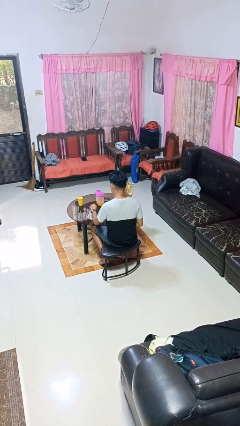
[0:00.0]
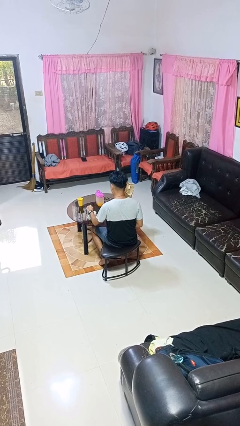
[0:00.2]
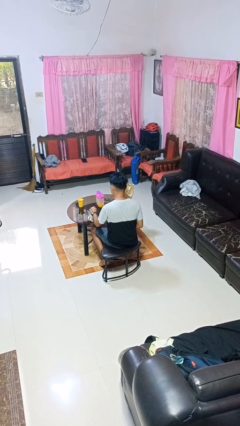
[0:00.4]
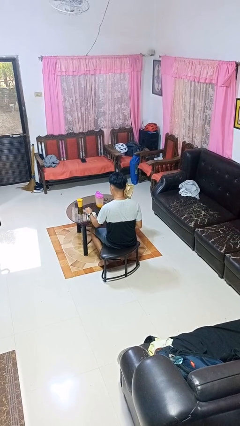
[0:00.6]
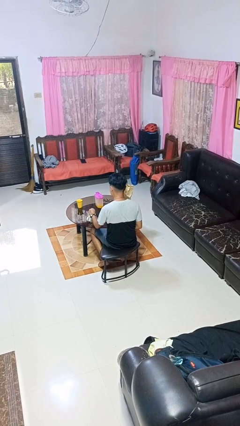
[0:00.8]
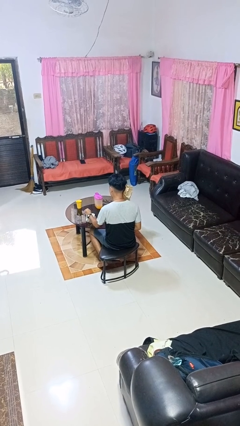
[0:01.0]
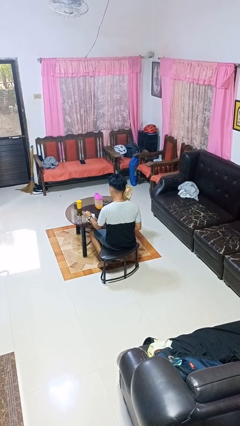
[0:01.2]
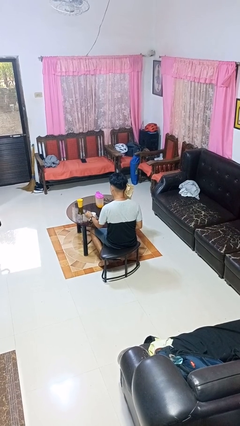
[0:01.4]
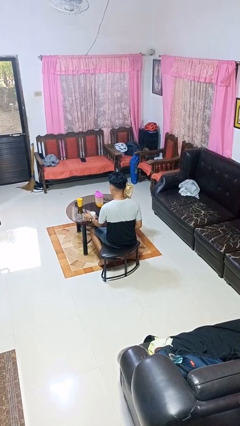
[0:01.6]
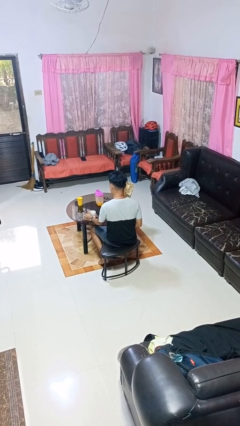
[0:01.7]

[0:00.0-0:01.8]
person stirs mug

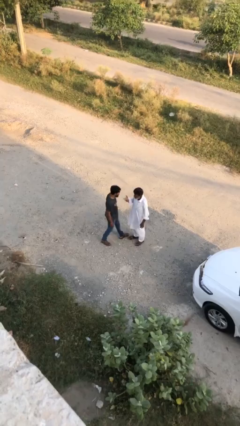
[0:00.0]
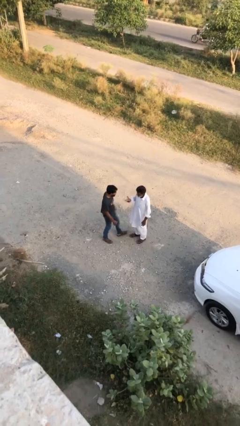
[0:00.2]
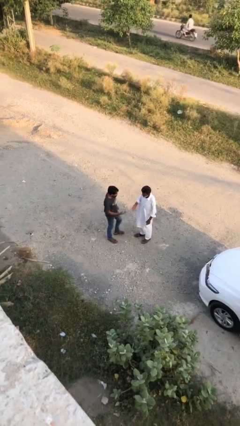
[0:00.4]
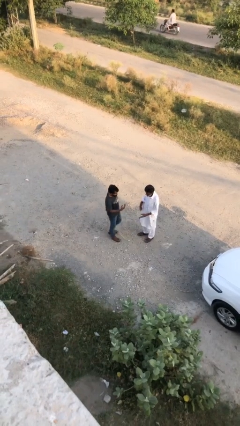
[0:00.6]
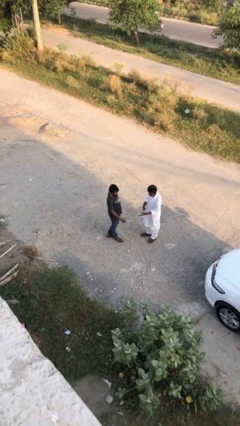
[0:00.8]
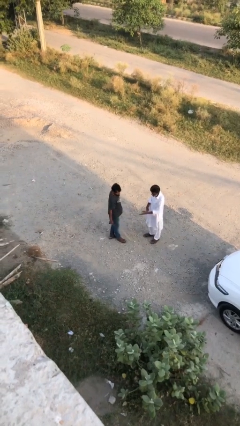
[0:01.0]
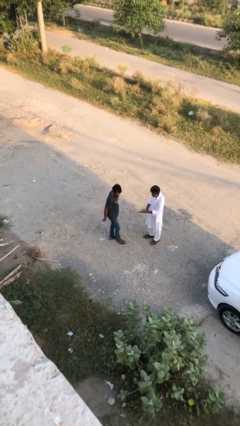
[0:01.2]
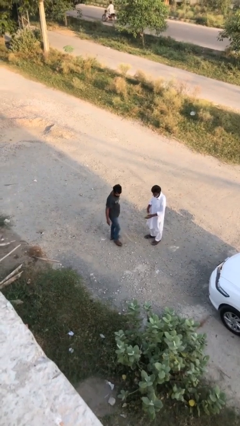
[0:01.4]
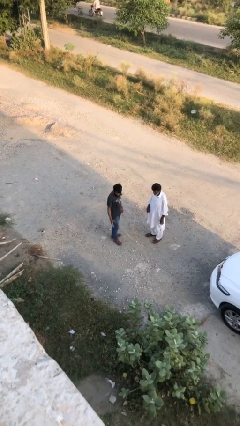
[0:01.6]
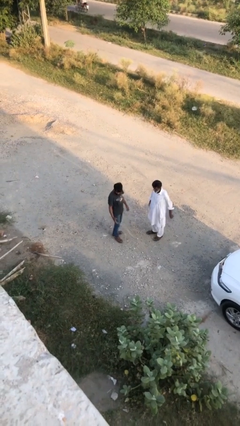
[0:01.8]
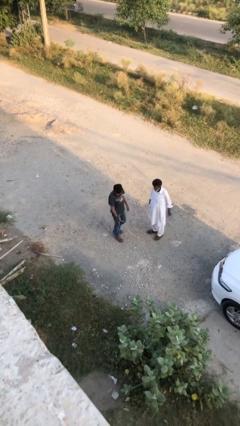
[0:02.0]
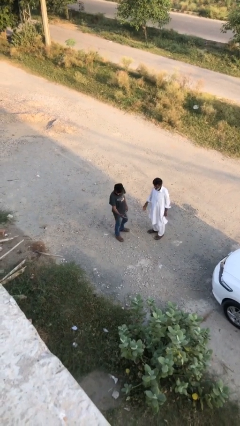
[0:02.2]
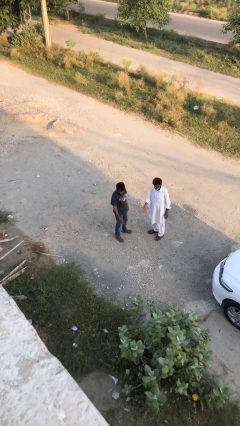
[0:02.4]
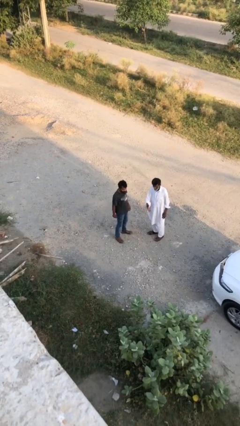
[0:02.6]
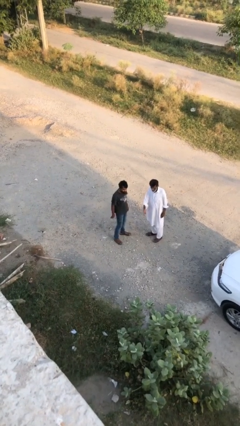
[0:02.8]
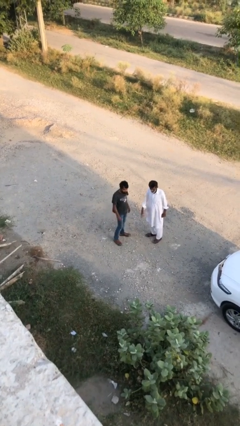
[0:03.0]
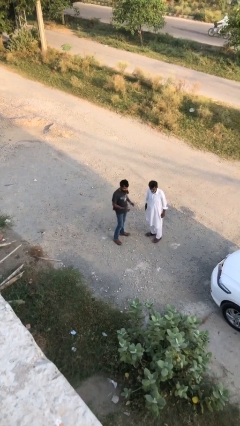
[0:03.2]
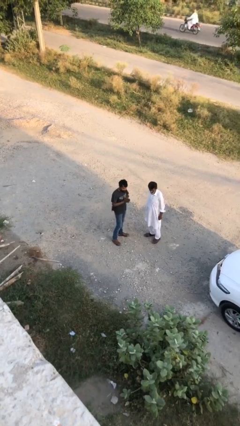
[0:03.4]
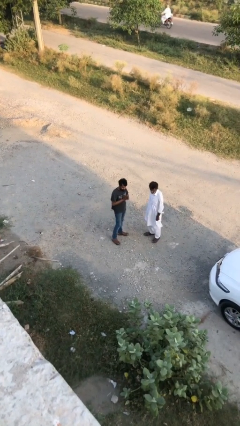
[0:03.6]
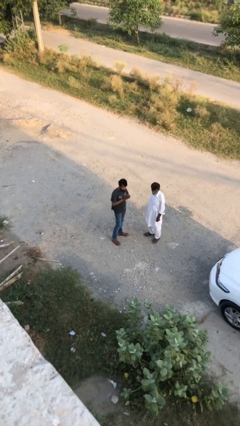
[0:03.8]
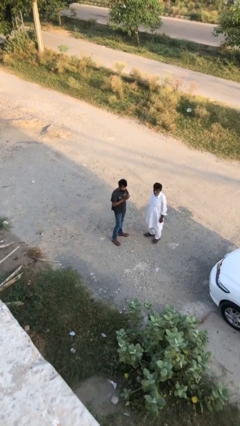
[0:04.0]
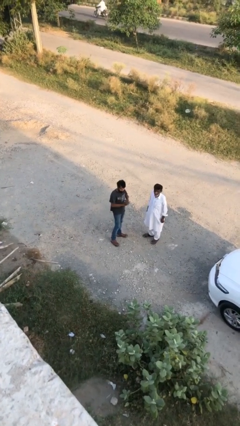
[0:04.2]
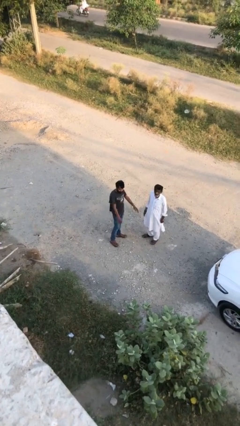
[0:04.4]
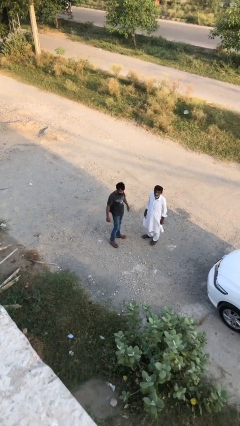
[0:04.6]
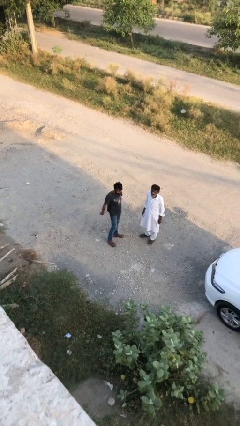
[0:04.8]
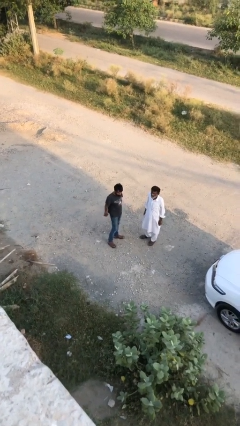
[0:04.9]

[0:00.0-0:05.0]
person talks to person

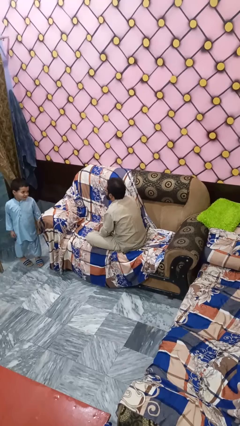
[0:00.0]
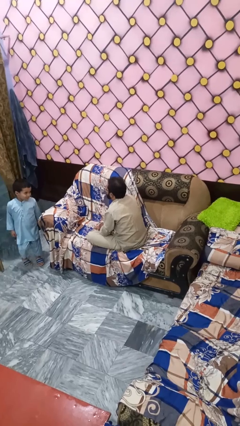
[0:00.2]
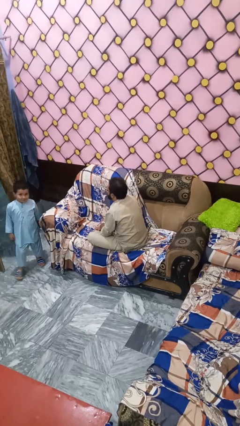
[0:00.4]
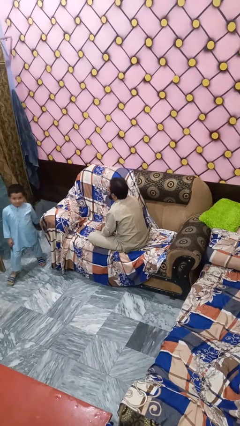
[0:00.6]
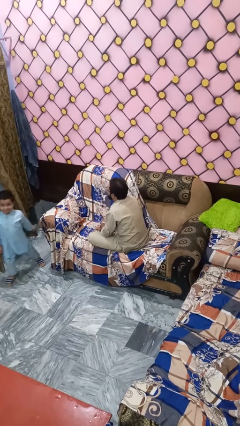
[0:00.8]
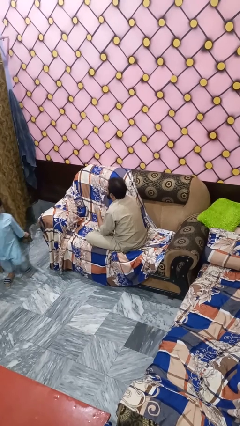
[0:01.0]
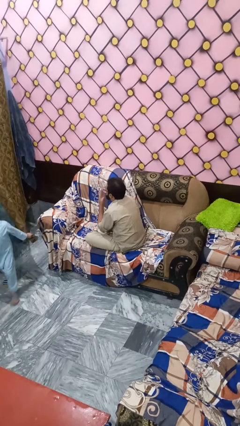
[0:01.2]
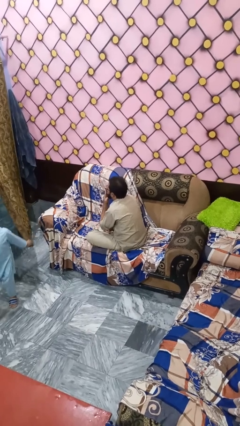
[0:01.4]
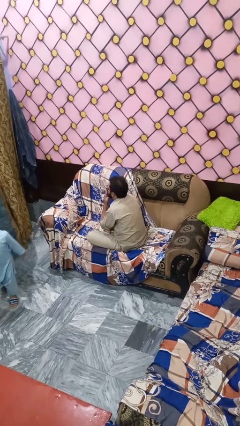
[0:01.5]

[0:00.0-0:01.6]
person gestures blow kiss

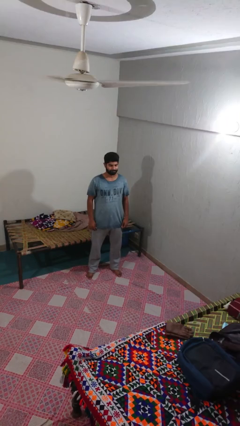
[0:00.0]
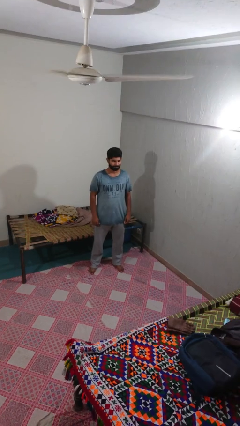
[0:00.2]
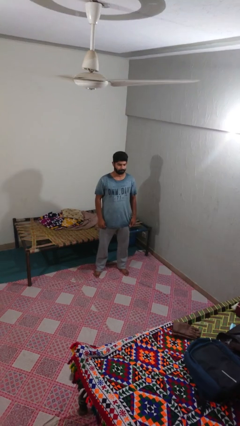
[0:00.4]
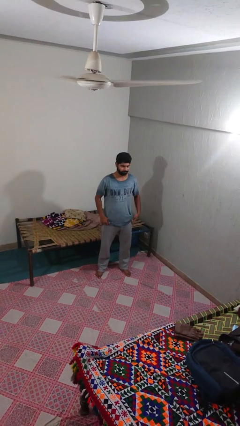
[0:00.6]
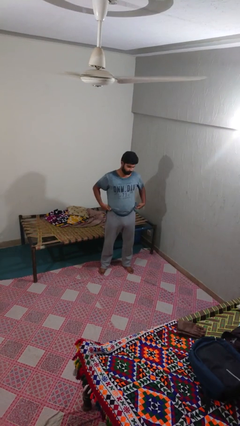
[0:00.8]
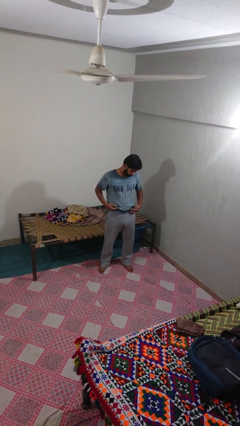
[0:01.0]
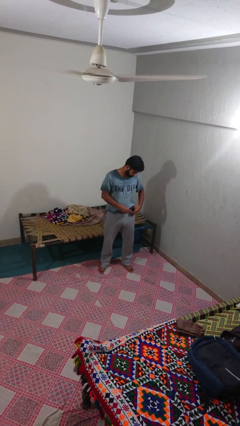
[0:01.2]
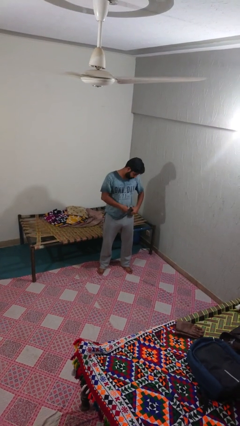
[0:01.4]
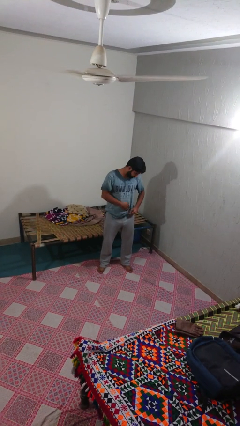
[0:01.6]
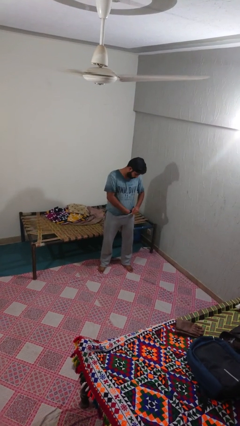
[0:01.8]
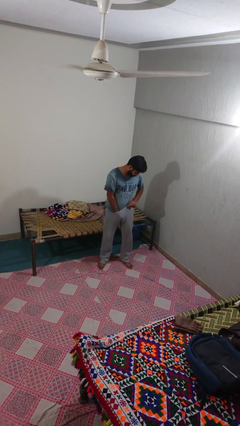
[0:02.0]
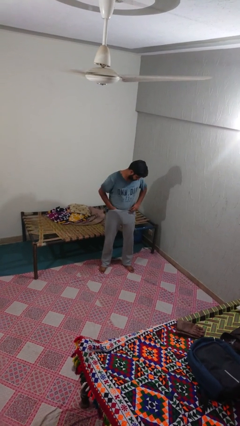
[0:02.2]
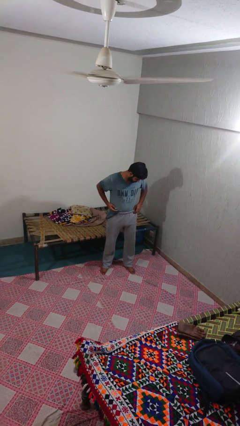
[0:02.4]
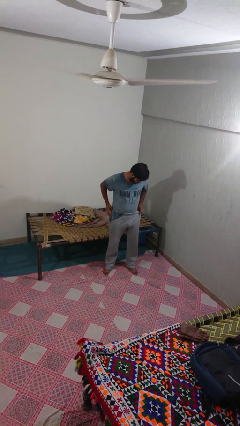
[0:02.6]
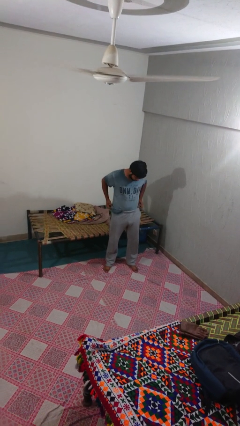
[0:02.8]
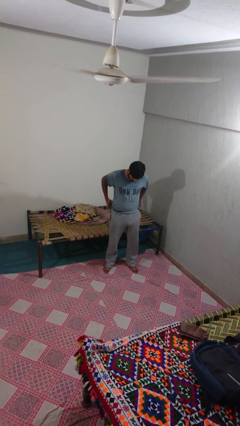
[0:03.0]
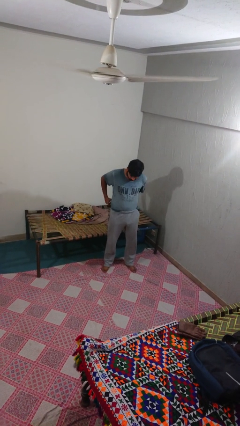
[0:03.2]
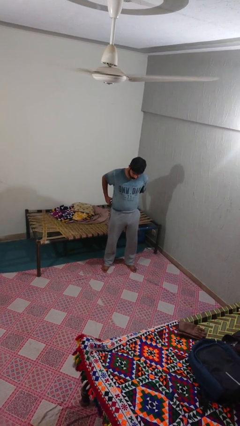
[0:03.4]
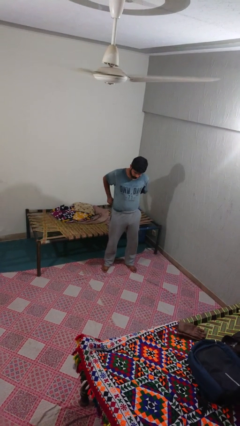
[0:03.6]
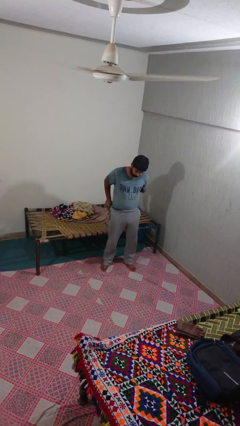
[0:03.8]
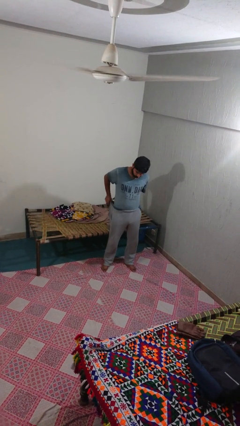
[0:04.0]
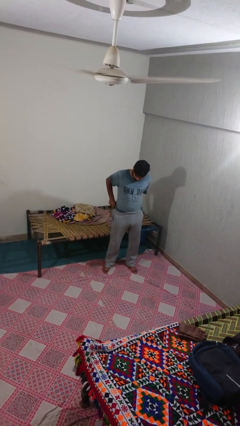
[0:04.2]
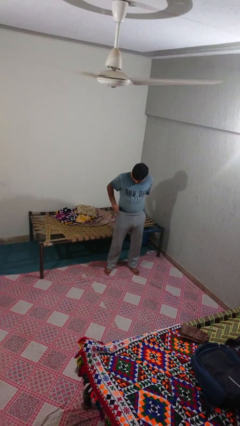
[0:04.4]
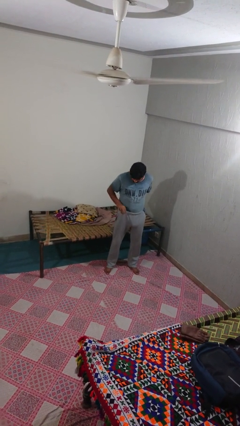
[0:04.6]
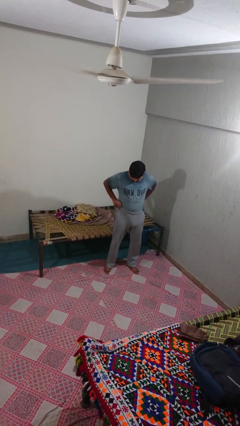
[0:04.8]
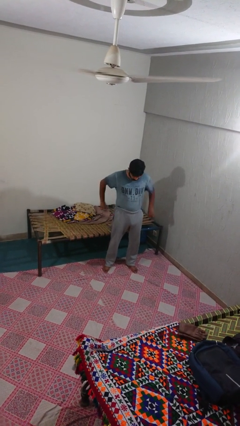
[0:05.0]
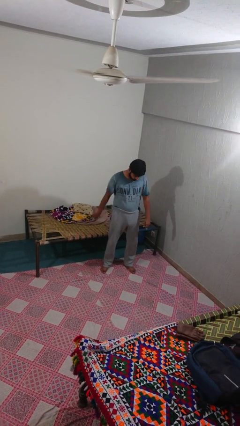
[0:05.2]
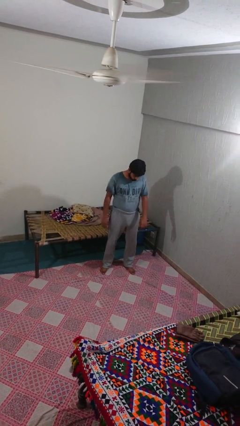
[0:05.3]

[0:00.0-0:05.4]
person tucks in shirt

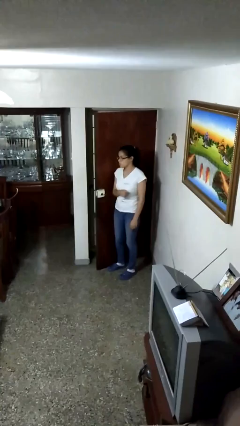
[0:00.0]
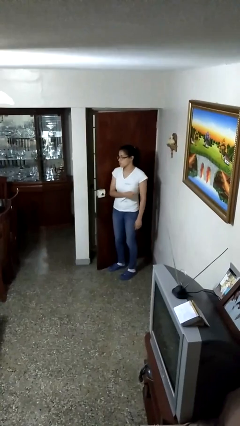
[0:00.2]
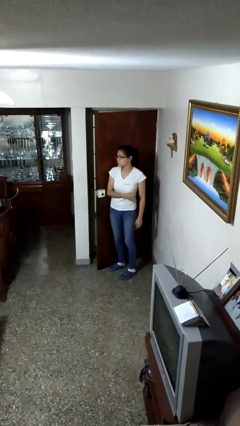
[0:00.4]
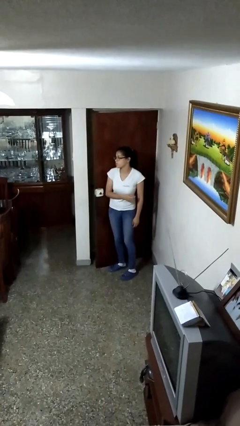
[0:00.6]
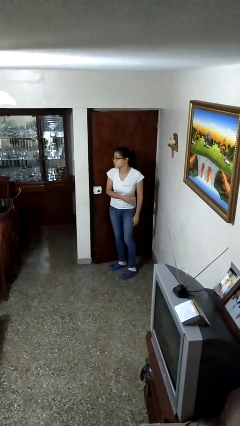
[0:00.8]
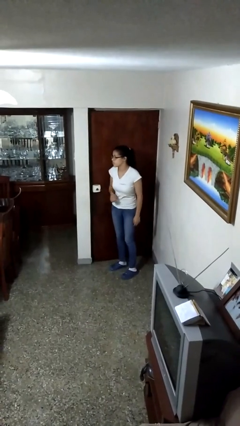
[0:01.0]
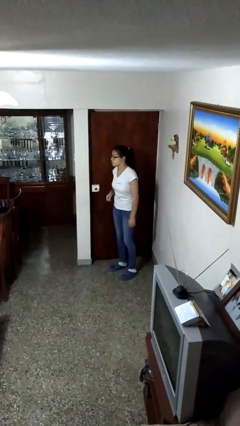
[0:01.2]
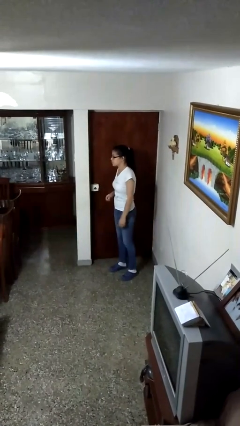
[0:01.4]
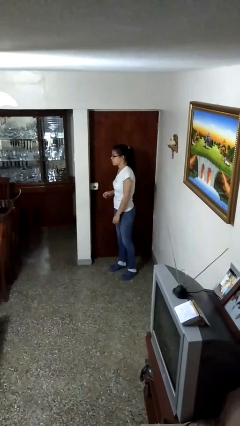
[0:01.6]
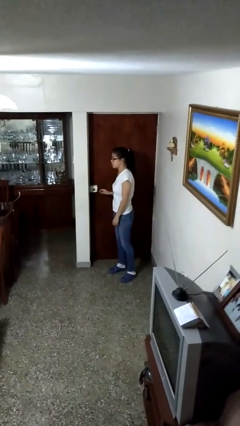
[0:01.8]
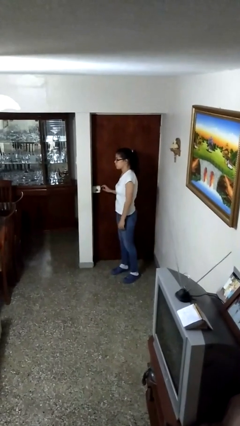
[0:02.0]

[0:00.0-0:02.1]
person closes door with hip

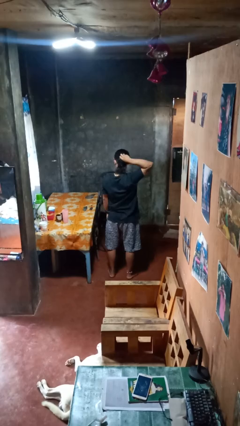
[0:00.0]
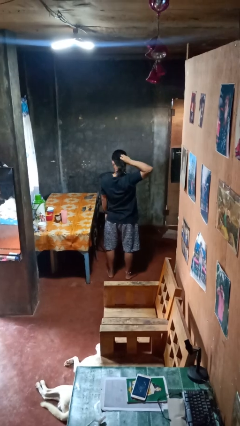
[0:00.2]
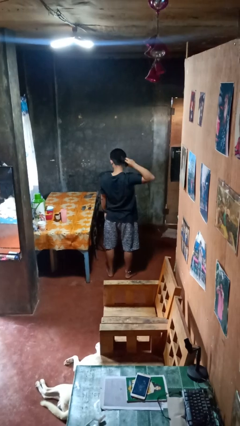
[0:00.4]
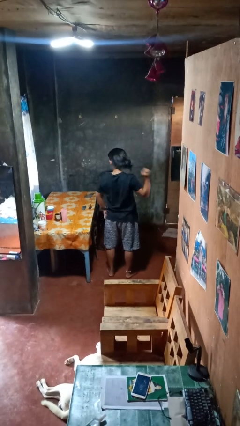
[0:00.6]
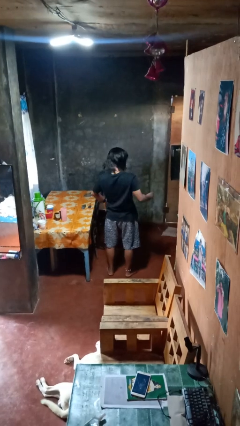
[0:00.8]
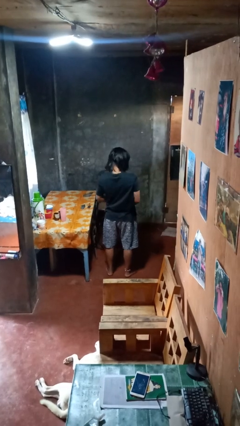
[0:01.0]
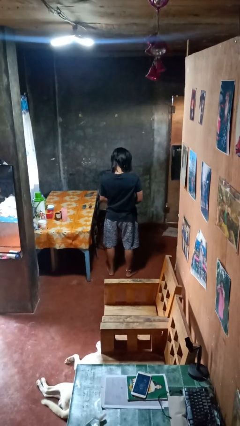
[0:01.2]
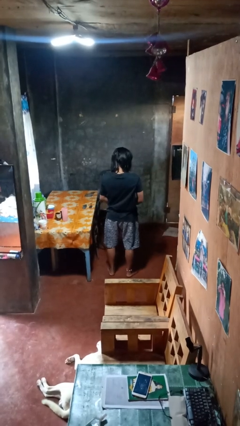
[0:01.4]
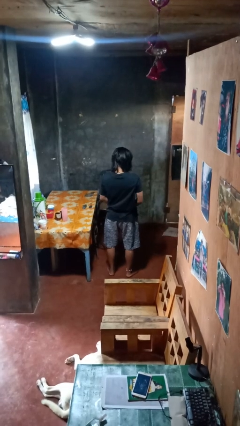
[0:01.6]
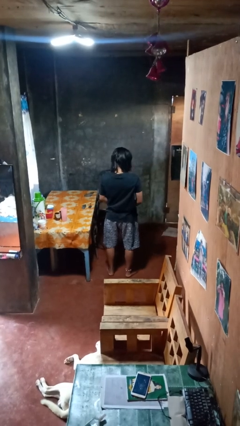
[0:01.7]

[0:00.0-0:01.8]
person takes off hairtie
